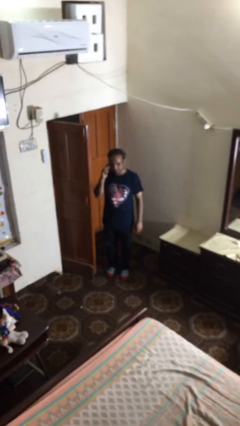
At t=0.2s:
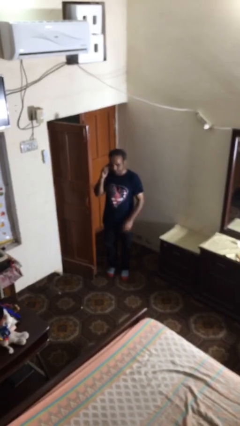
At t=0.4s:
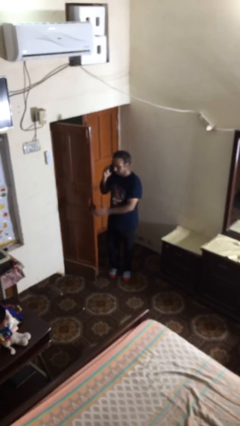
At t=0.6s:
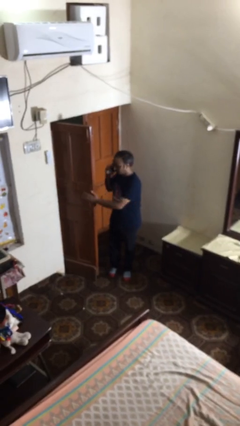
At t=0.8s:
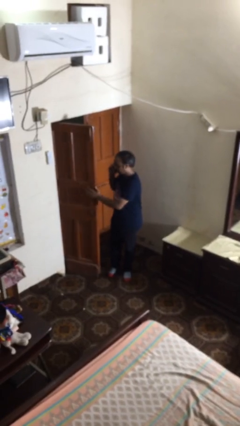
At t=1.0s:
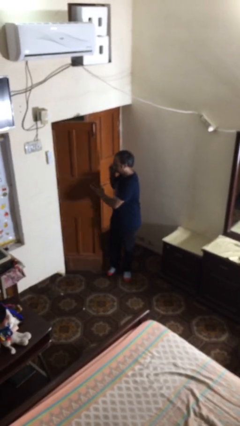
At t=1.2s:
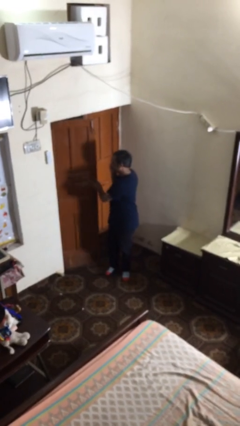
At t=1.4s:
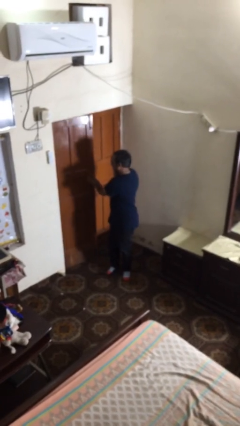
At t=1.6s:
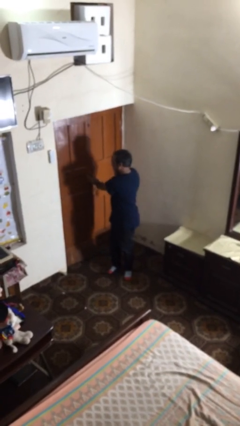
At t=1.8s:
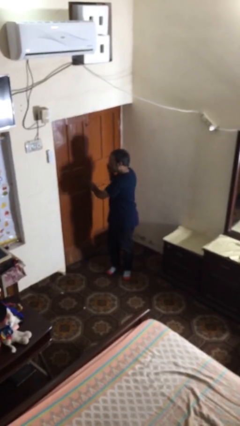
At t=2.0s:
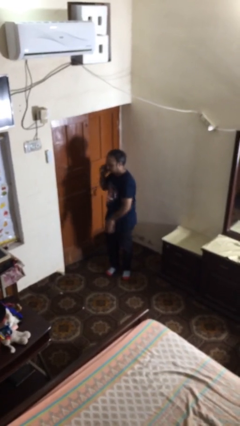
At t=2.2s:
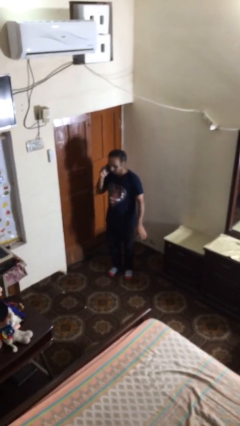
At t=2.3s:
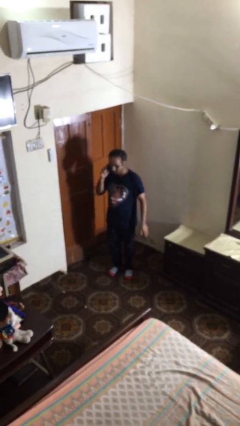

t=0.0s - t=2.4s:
person closes facility door

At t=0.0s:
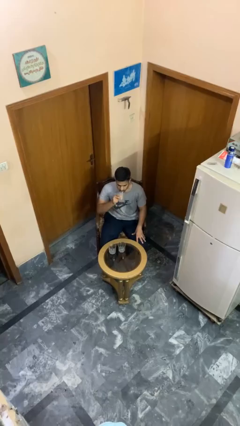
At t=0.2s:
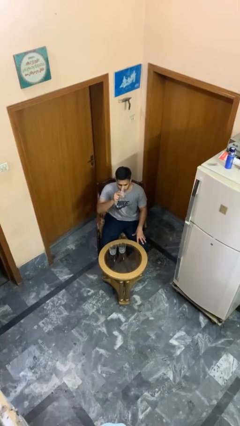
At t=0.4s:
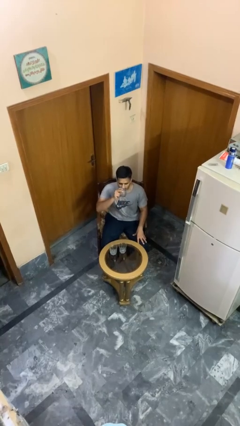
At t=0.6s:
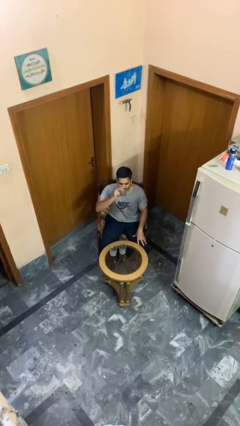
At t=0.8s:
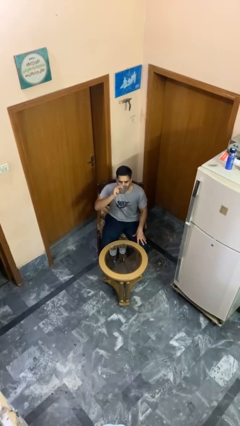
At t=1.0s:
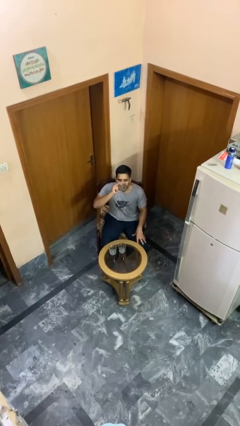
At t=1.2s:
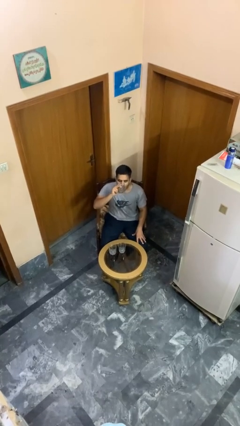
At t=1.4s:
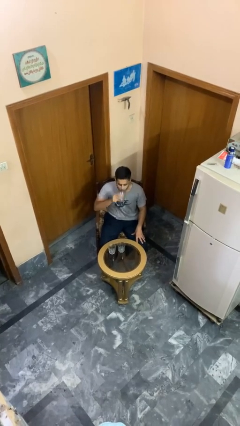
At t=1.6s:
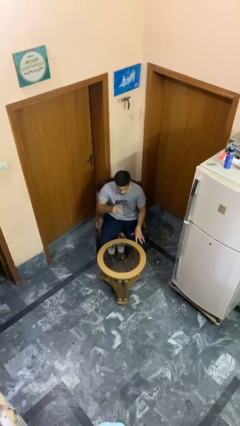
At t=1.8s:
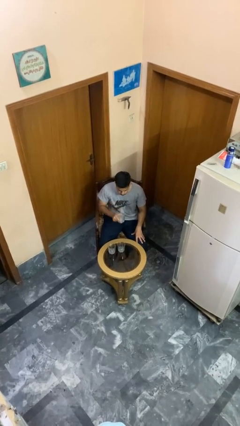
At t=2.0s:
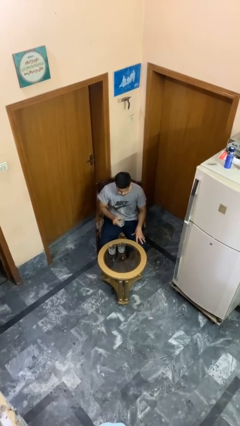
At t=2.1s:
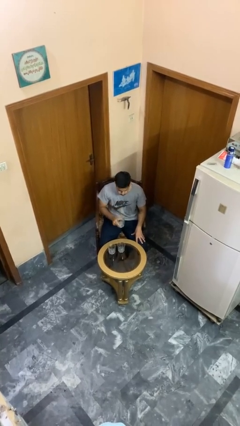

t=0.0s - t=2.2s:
person drinks from shotglass

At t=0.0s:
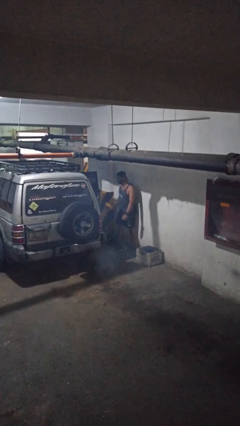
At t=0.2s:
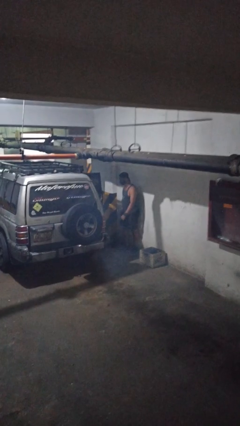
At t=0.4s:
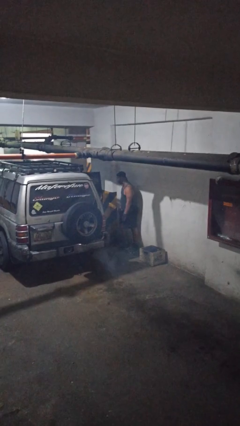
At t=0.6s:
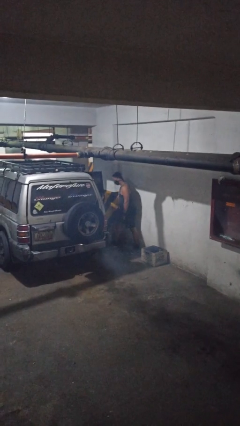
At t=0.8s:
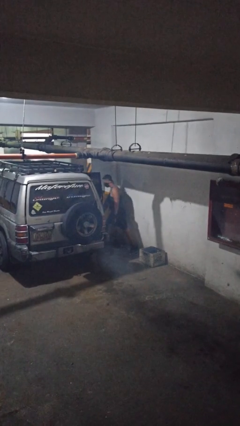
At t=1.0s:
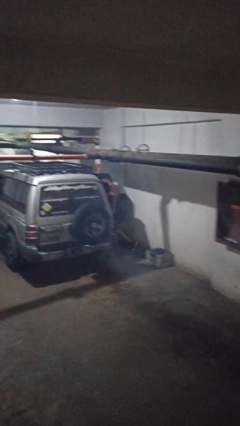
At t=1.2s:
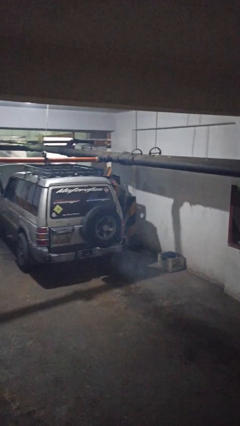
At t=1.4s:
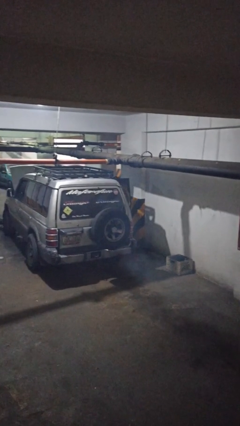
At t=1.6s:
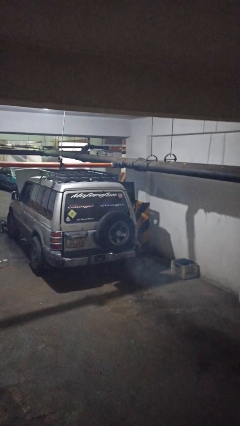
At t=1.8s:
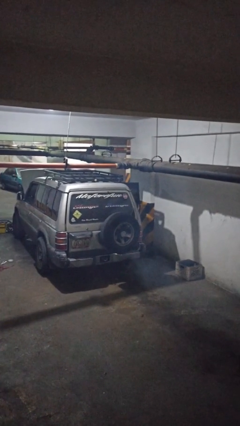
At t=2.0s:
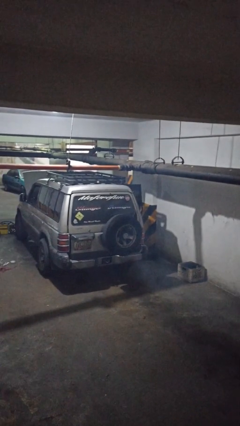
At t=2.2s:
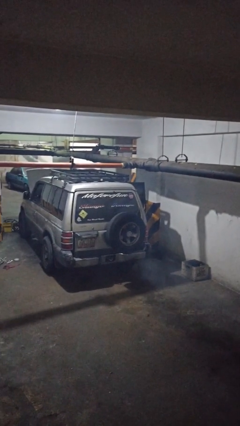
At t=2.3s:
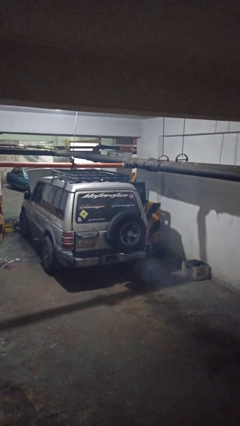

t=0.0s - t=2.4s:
person enters car

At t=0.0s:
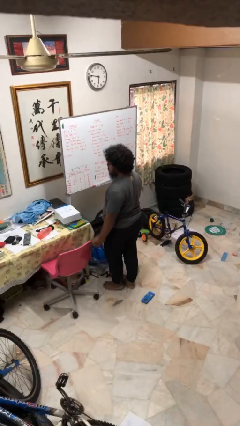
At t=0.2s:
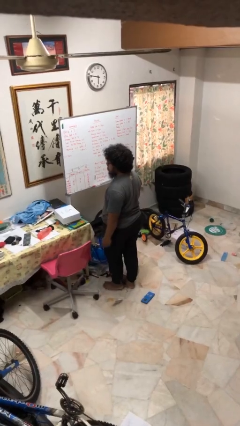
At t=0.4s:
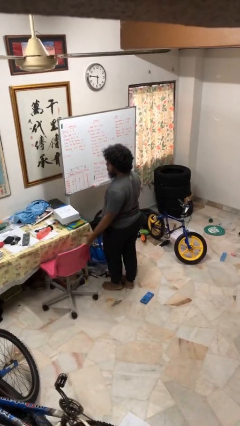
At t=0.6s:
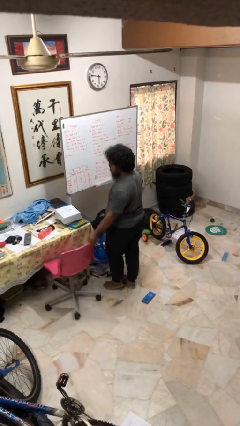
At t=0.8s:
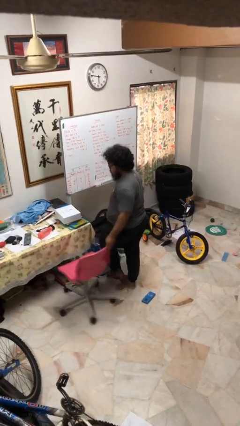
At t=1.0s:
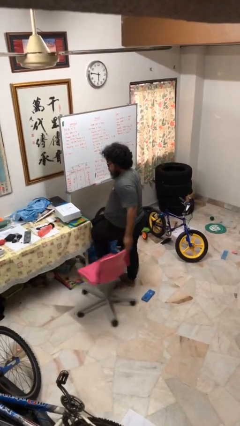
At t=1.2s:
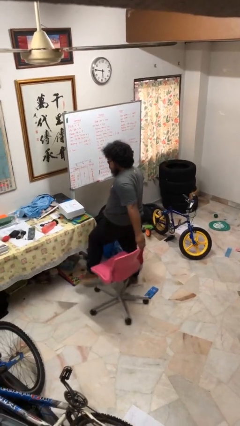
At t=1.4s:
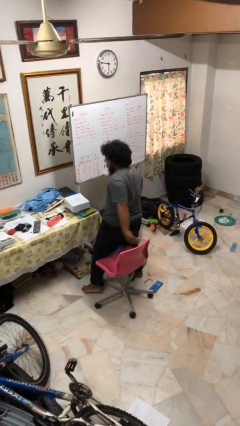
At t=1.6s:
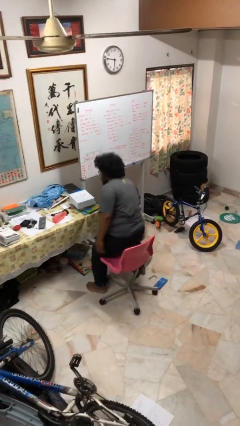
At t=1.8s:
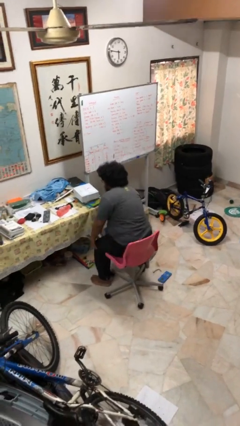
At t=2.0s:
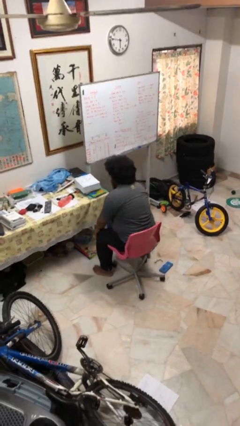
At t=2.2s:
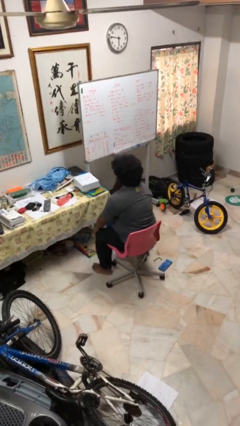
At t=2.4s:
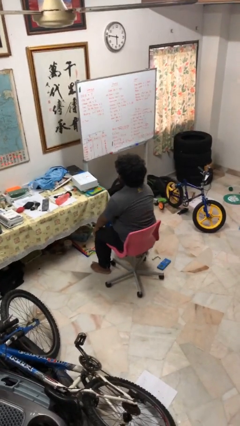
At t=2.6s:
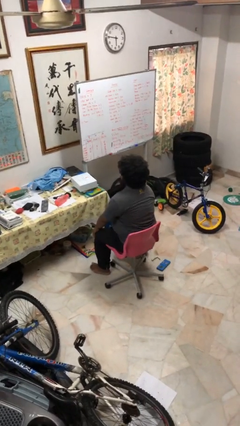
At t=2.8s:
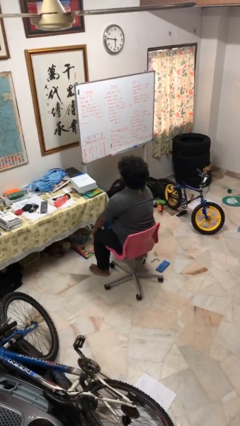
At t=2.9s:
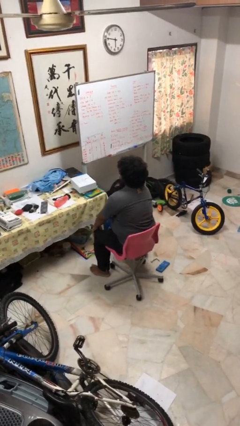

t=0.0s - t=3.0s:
person sits down

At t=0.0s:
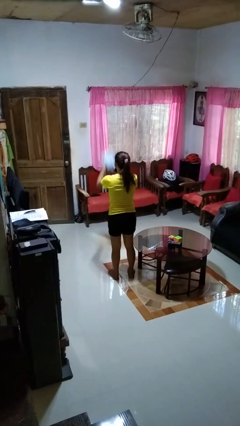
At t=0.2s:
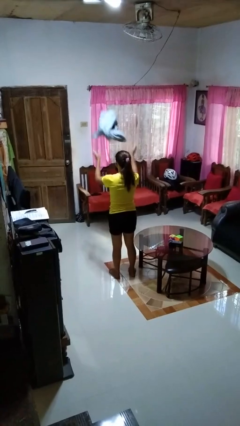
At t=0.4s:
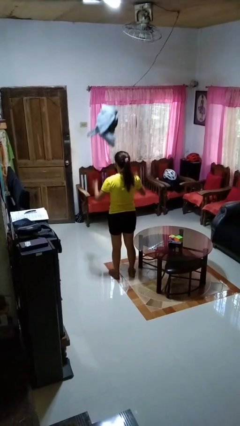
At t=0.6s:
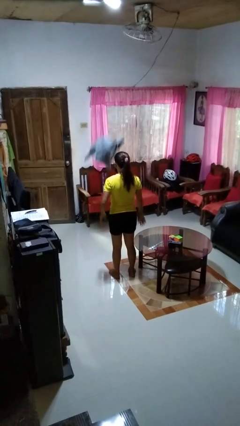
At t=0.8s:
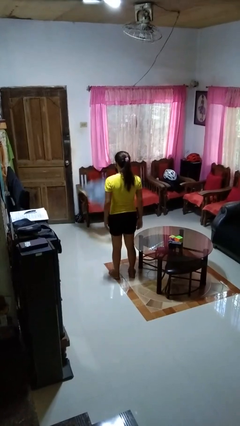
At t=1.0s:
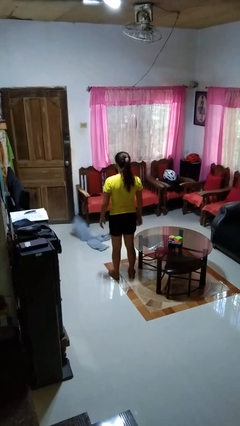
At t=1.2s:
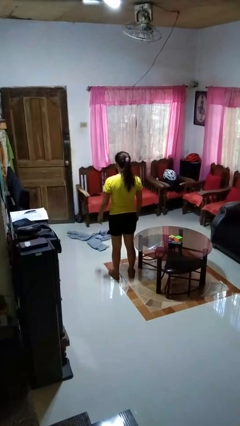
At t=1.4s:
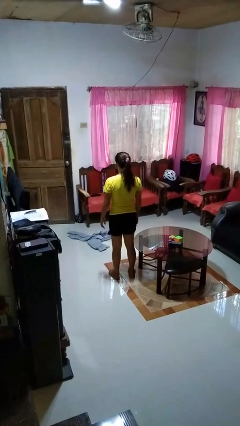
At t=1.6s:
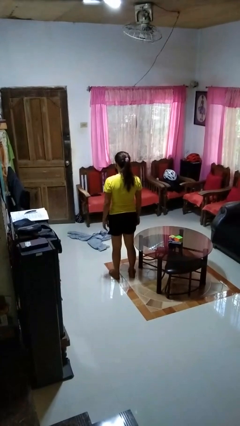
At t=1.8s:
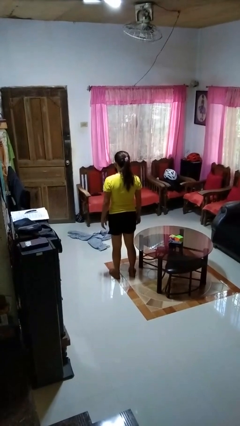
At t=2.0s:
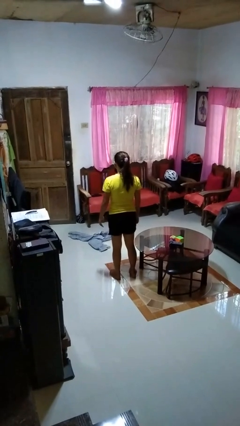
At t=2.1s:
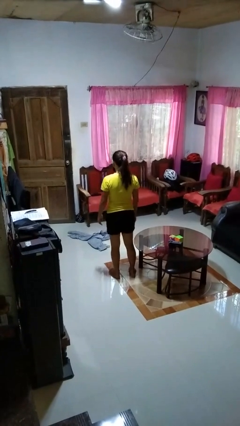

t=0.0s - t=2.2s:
person throws object into air

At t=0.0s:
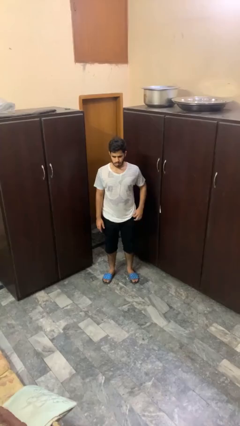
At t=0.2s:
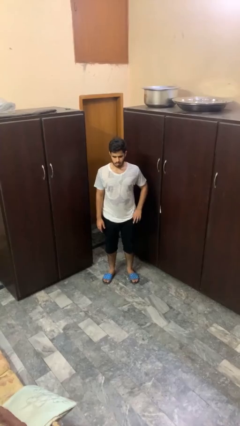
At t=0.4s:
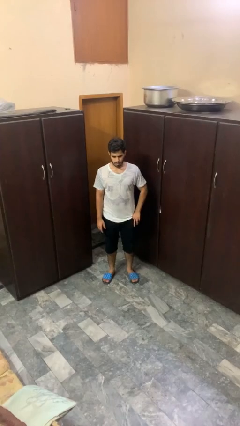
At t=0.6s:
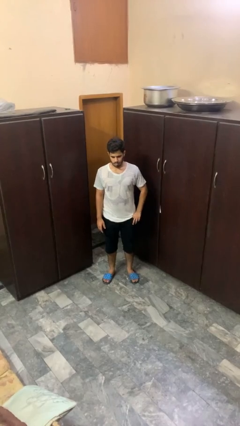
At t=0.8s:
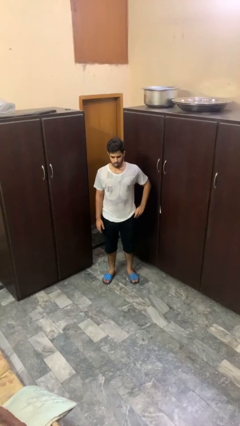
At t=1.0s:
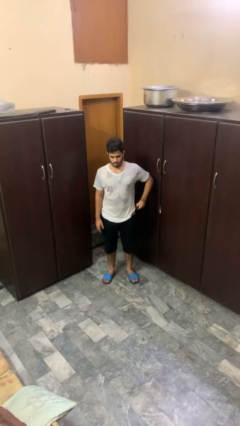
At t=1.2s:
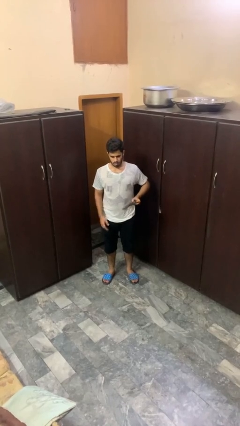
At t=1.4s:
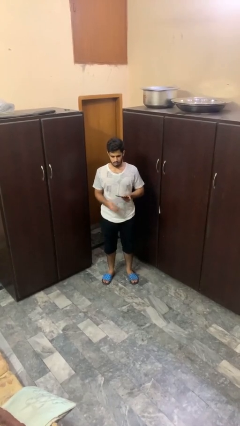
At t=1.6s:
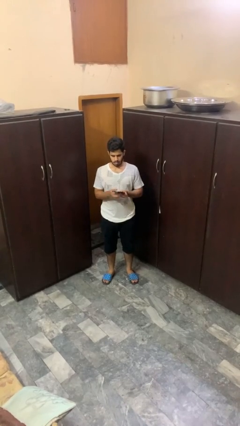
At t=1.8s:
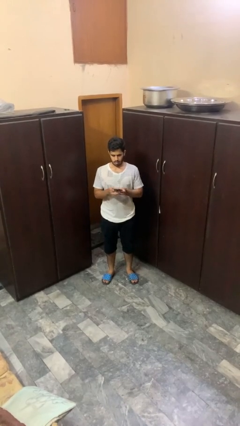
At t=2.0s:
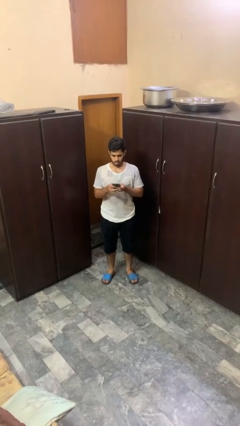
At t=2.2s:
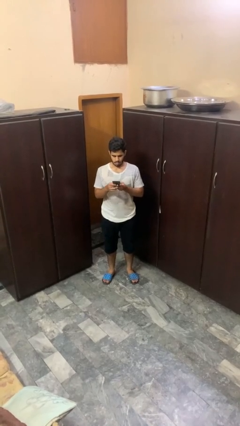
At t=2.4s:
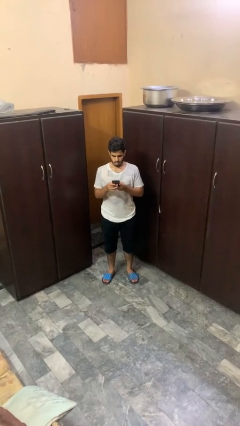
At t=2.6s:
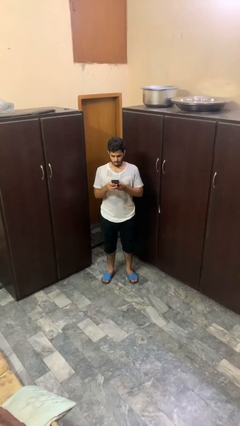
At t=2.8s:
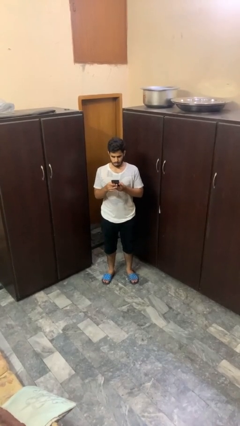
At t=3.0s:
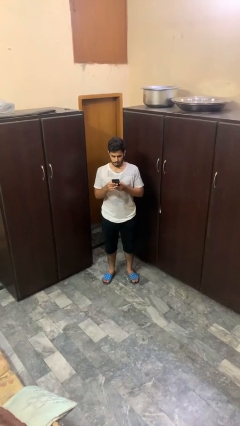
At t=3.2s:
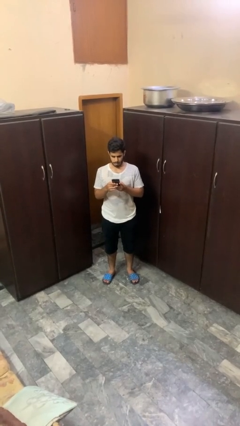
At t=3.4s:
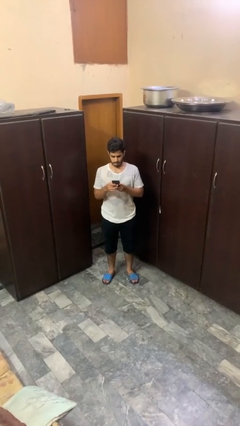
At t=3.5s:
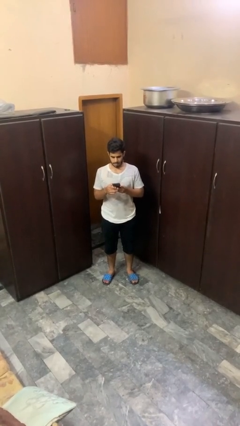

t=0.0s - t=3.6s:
person takes phone from pocket

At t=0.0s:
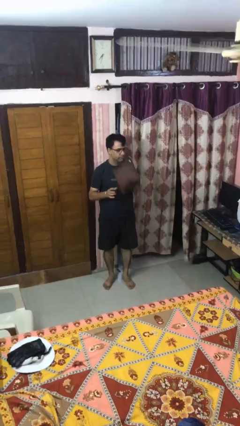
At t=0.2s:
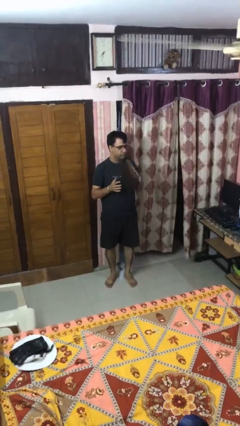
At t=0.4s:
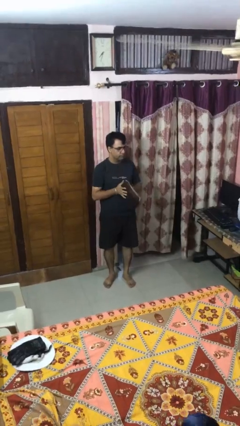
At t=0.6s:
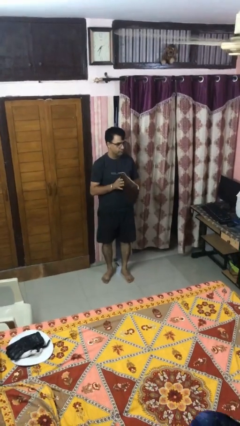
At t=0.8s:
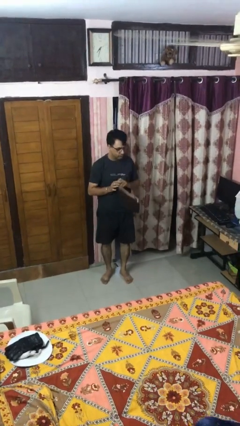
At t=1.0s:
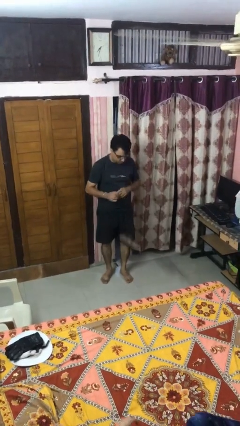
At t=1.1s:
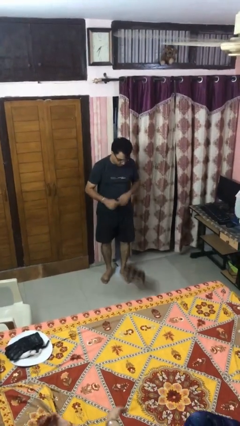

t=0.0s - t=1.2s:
person drops object

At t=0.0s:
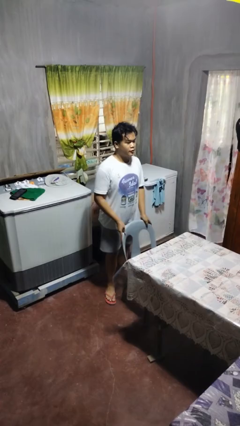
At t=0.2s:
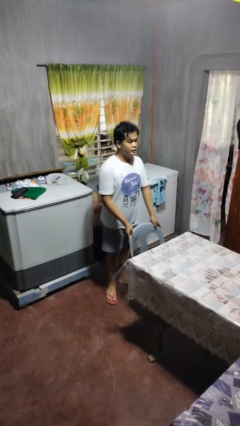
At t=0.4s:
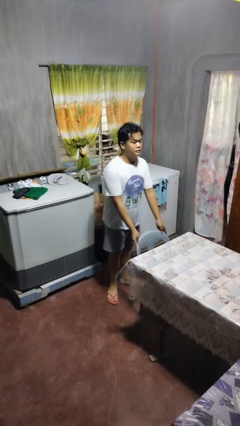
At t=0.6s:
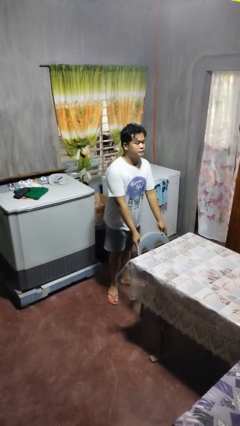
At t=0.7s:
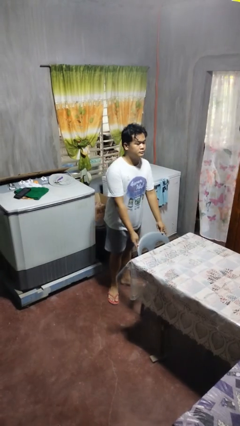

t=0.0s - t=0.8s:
person pushes in chair
